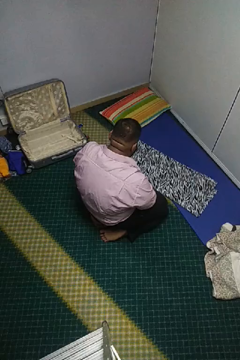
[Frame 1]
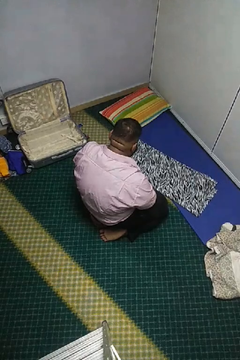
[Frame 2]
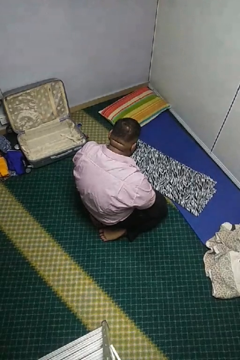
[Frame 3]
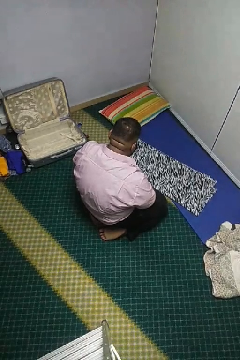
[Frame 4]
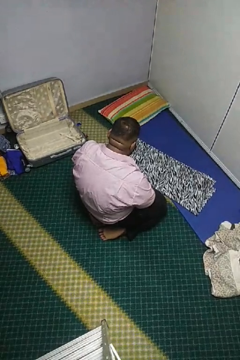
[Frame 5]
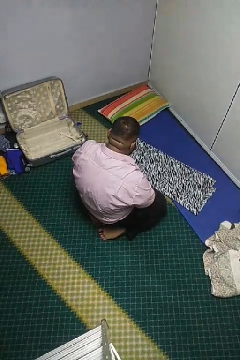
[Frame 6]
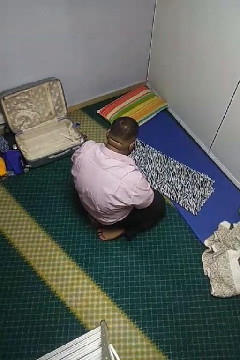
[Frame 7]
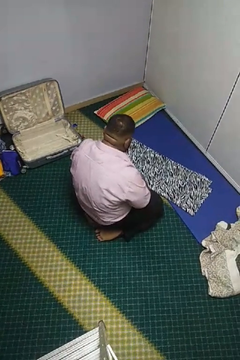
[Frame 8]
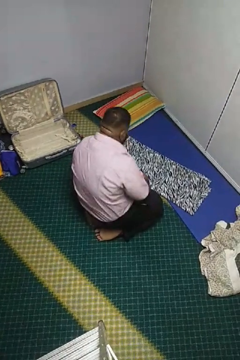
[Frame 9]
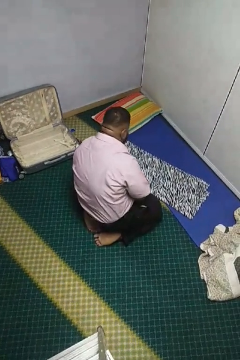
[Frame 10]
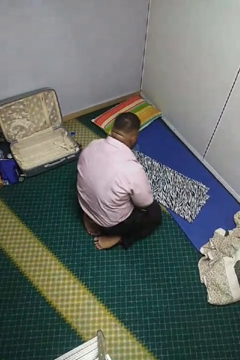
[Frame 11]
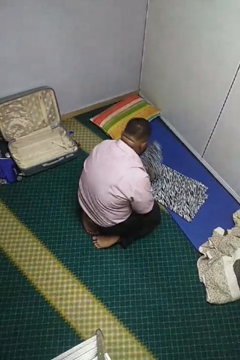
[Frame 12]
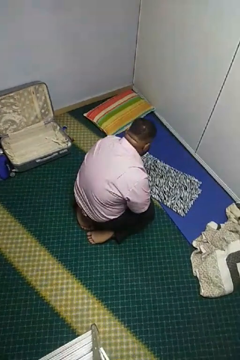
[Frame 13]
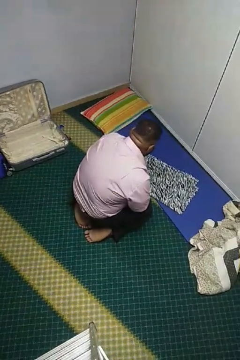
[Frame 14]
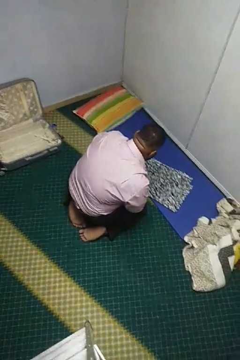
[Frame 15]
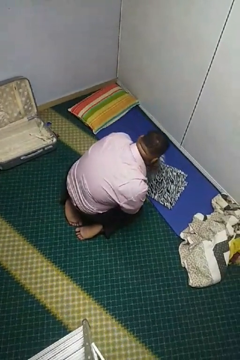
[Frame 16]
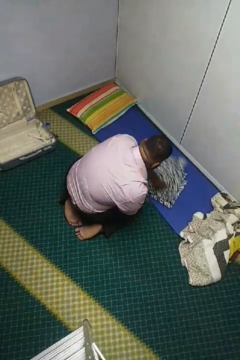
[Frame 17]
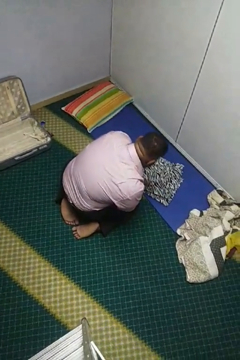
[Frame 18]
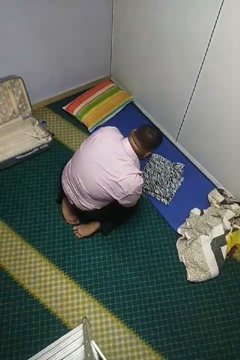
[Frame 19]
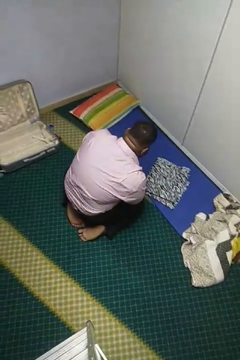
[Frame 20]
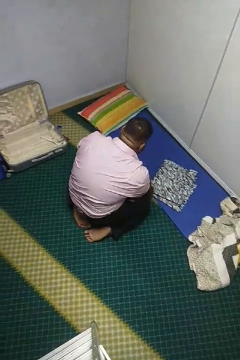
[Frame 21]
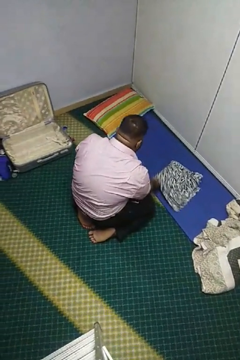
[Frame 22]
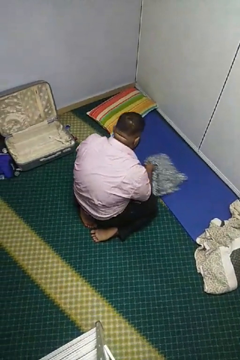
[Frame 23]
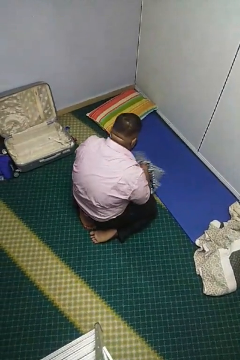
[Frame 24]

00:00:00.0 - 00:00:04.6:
person folds blanket

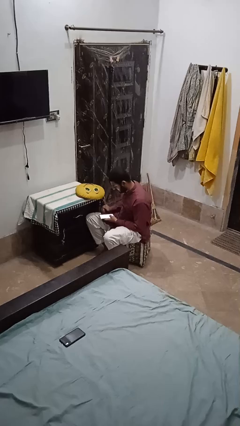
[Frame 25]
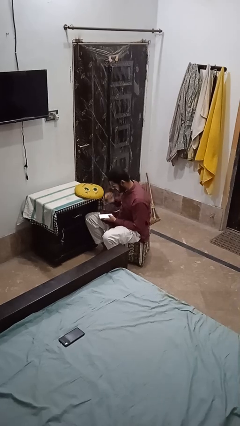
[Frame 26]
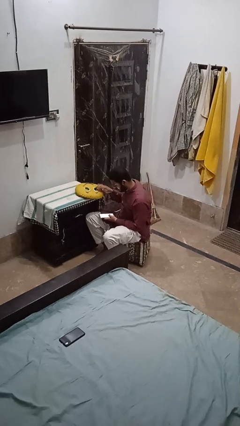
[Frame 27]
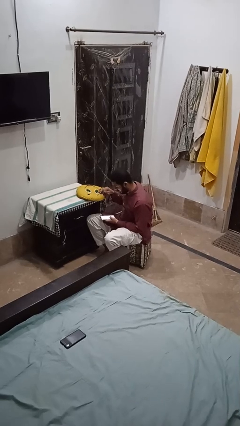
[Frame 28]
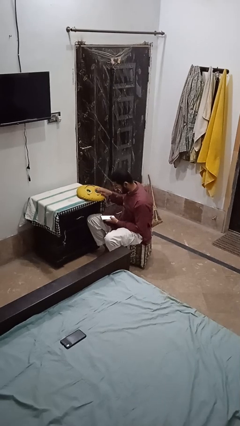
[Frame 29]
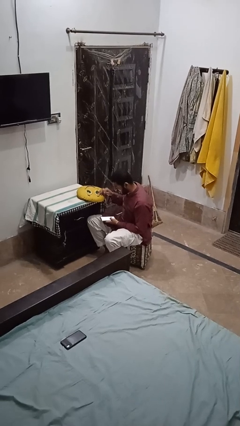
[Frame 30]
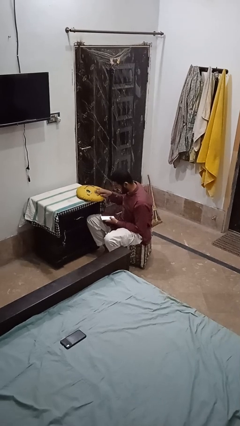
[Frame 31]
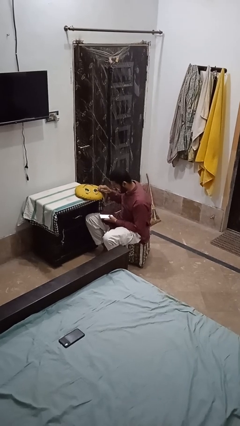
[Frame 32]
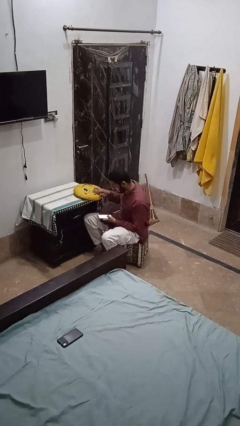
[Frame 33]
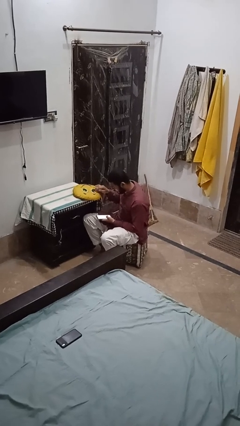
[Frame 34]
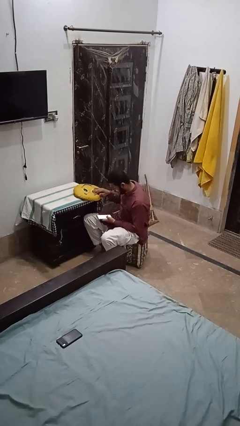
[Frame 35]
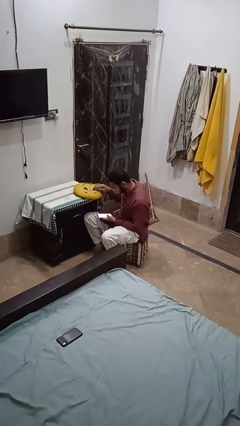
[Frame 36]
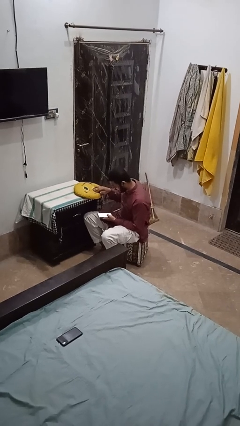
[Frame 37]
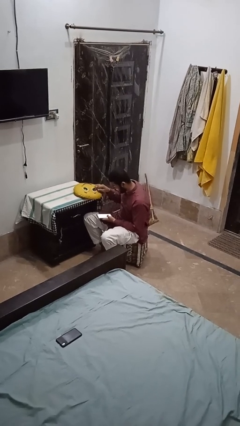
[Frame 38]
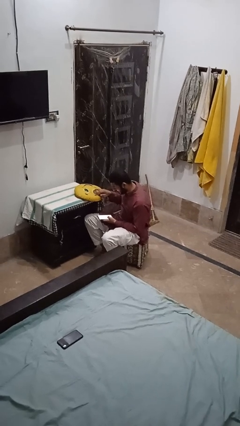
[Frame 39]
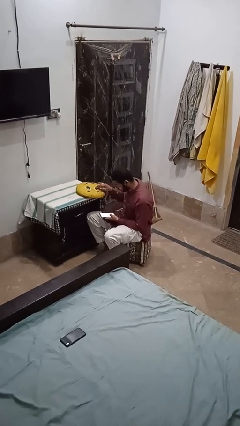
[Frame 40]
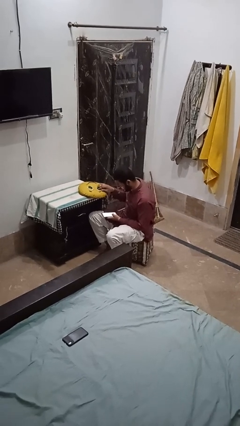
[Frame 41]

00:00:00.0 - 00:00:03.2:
person waves hand over object

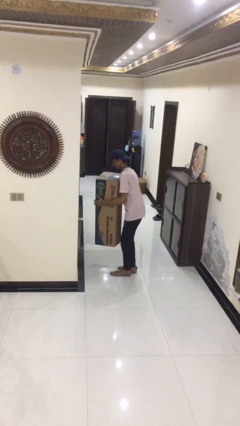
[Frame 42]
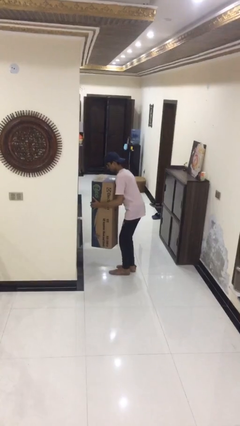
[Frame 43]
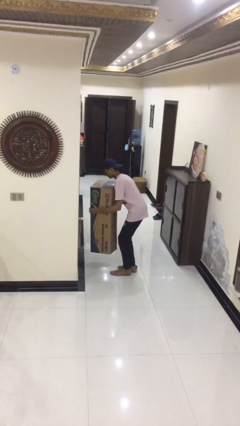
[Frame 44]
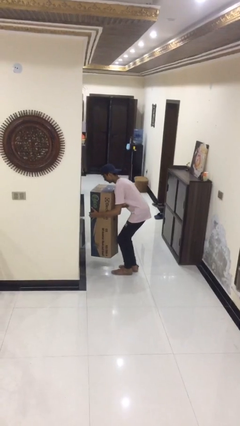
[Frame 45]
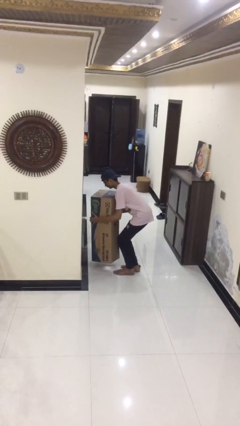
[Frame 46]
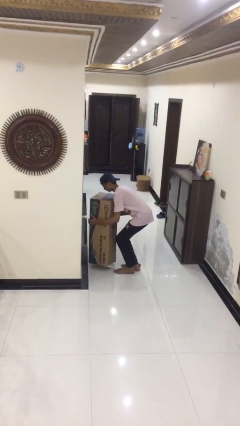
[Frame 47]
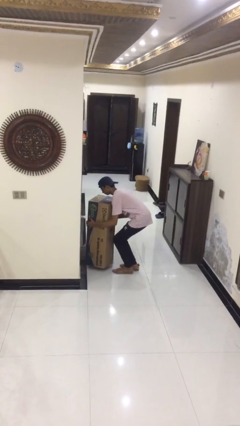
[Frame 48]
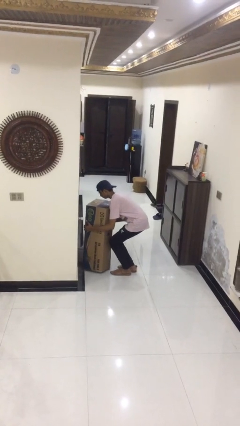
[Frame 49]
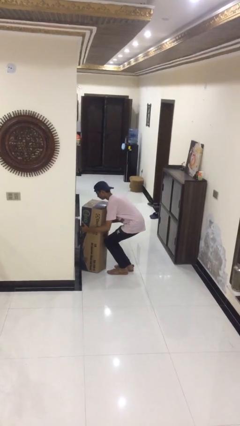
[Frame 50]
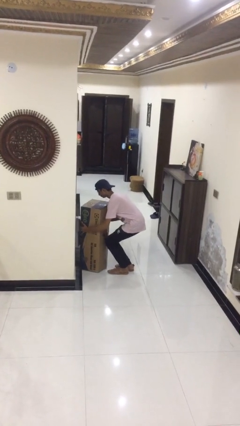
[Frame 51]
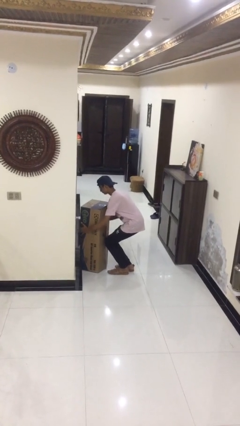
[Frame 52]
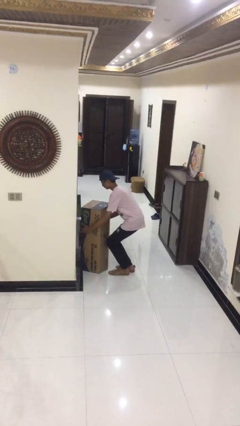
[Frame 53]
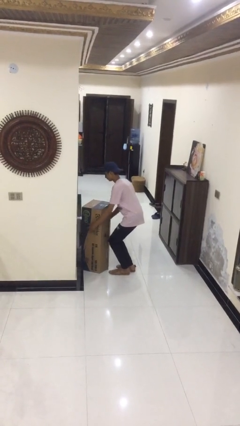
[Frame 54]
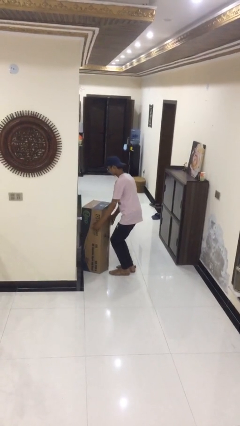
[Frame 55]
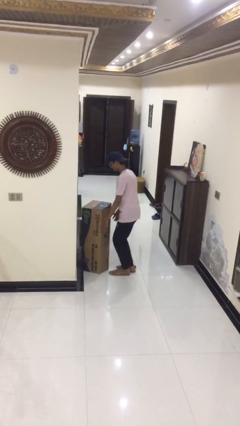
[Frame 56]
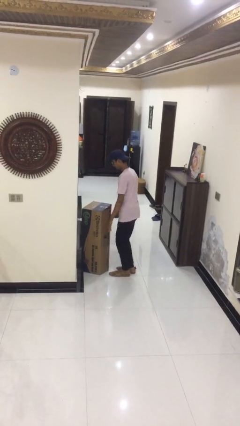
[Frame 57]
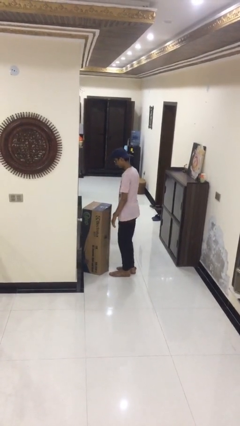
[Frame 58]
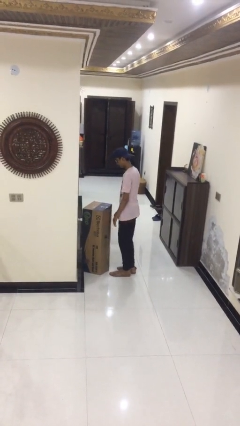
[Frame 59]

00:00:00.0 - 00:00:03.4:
person puts down object on floor

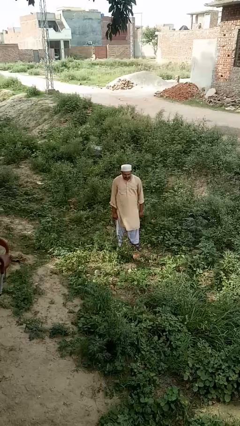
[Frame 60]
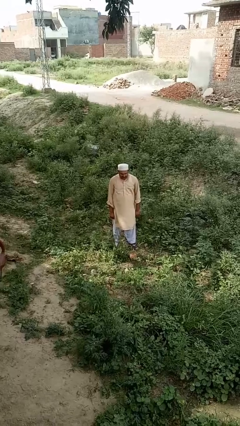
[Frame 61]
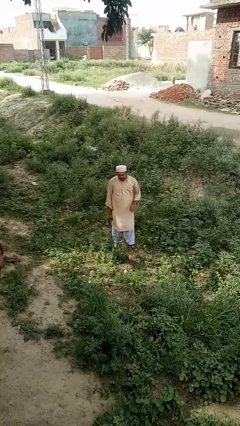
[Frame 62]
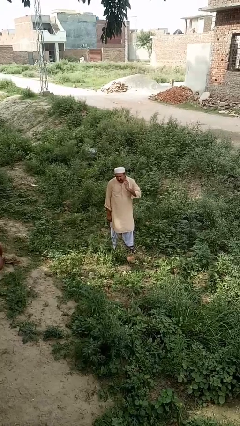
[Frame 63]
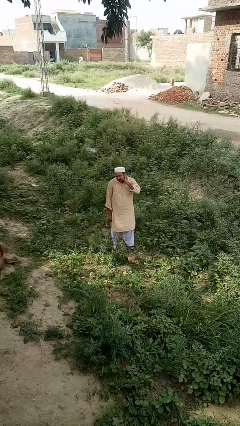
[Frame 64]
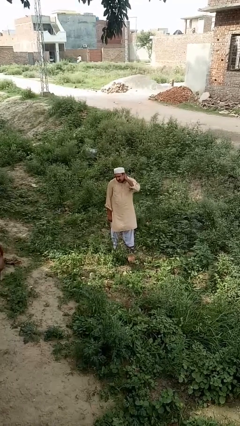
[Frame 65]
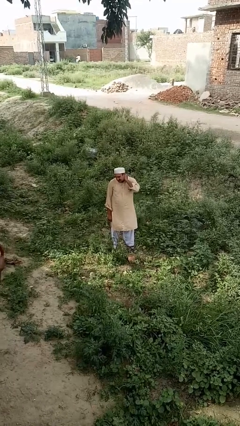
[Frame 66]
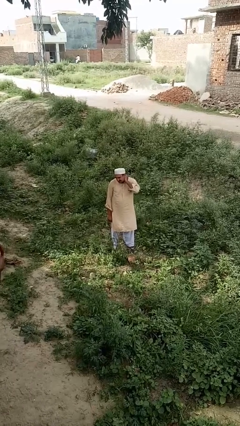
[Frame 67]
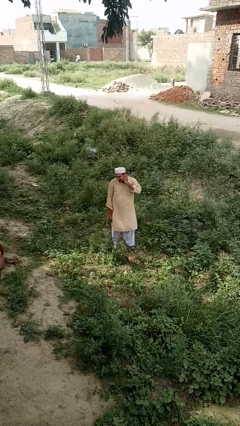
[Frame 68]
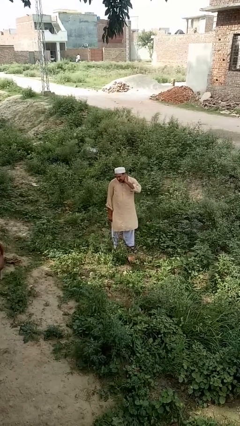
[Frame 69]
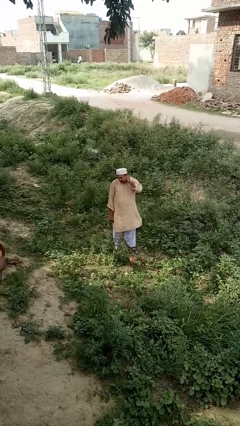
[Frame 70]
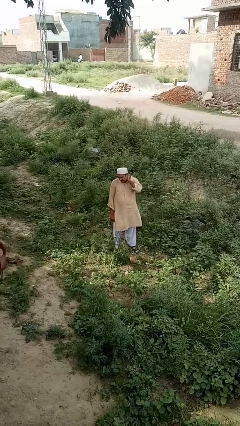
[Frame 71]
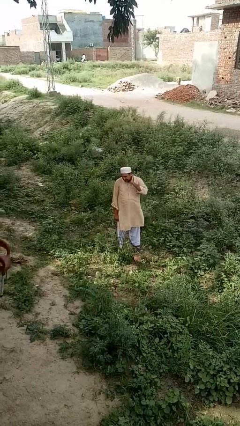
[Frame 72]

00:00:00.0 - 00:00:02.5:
person rubs neck

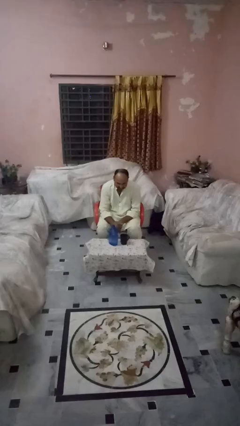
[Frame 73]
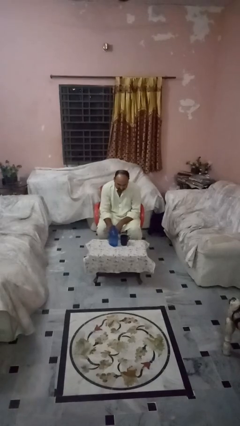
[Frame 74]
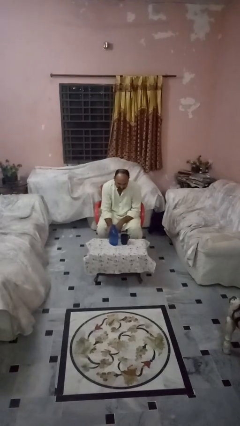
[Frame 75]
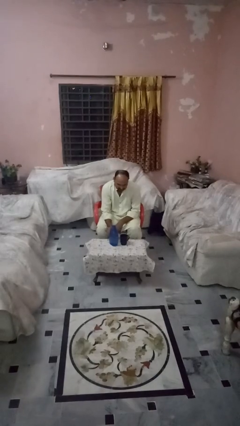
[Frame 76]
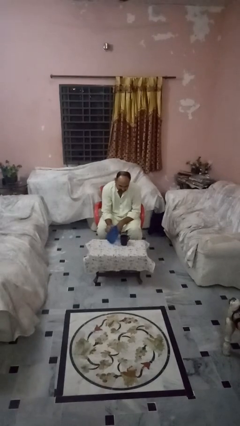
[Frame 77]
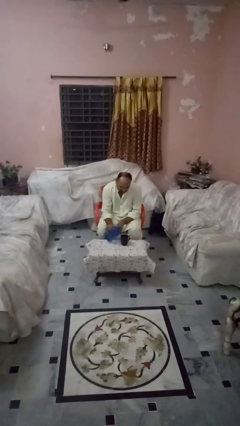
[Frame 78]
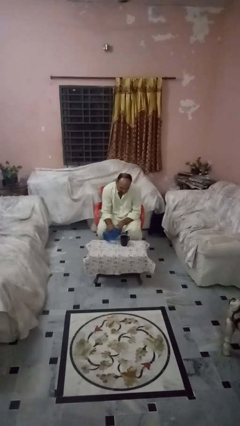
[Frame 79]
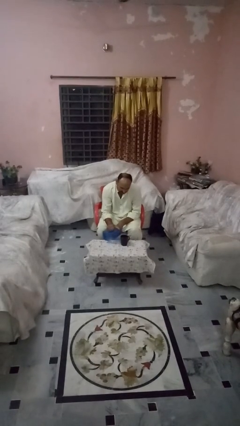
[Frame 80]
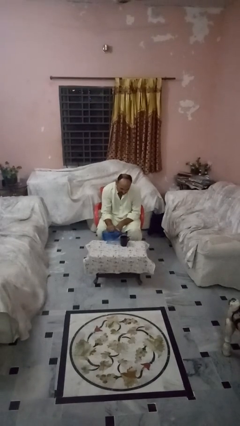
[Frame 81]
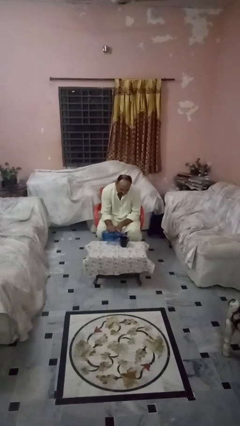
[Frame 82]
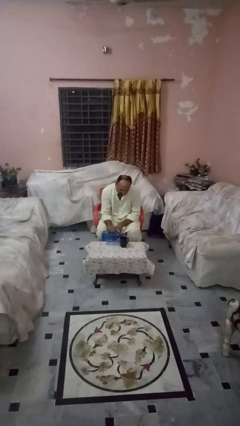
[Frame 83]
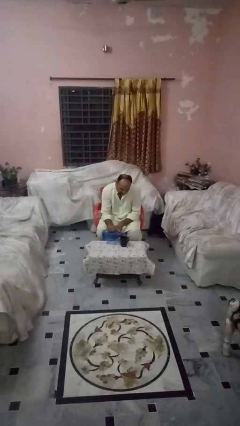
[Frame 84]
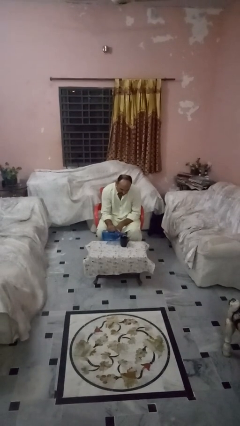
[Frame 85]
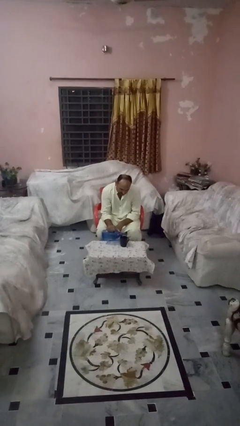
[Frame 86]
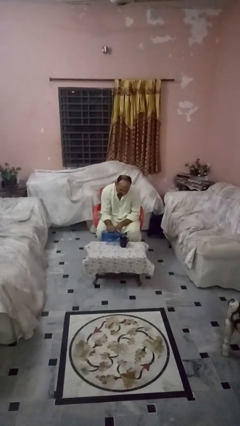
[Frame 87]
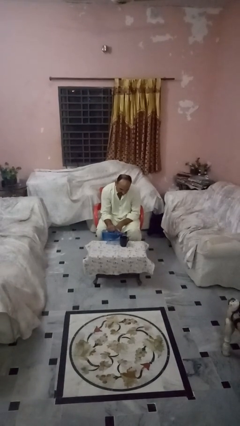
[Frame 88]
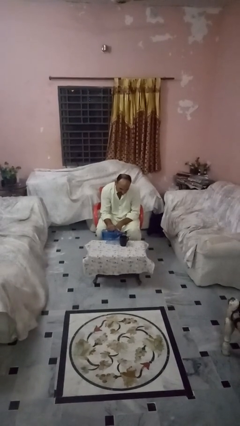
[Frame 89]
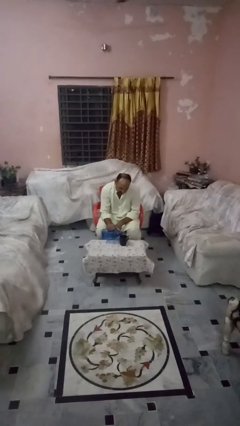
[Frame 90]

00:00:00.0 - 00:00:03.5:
person pours liquid into cup

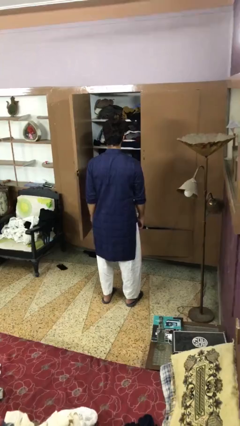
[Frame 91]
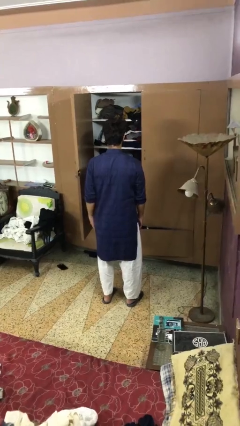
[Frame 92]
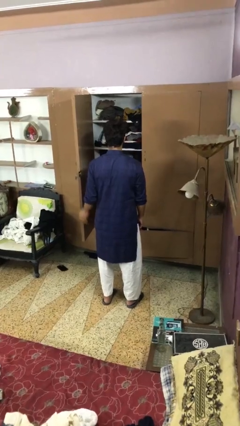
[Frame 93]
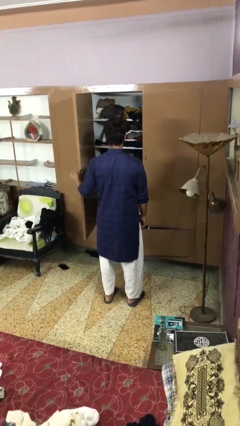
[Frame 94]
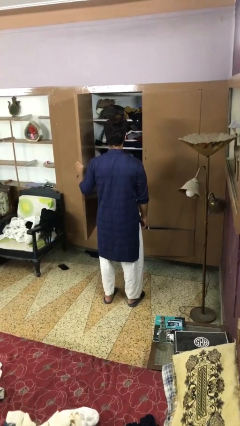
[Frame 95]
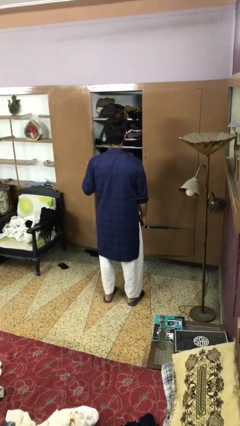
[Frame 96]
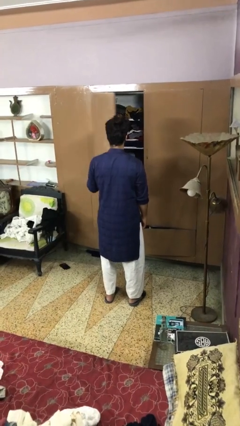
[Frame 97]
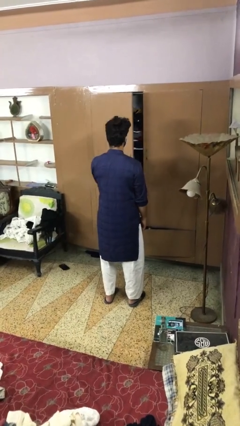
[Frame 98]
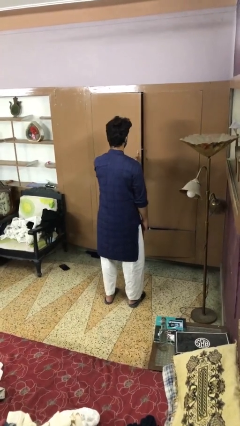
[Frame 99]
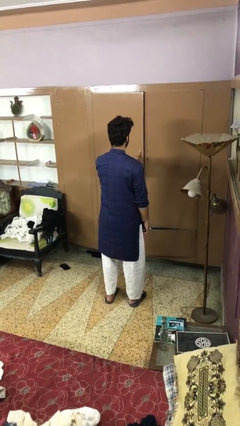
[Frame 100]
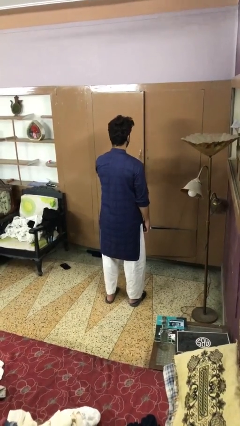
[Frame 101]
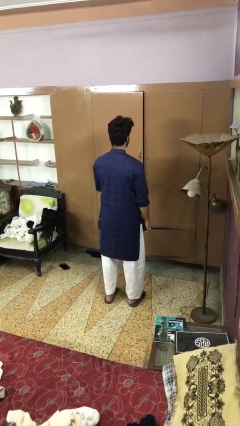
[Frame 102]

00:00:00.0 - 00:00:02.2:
person closes closet door
